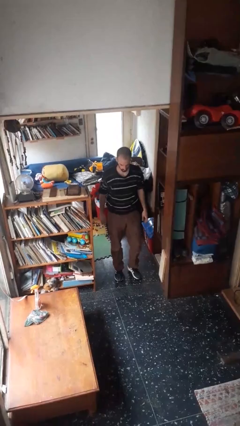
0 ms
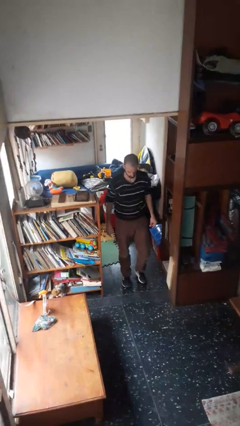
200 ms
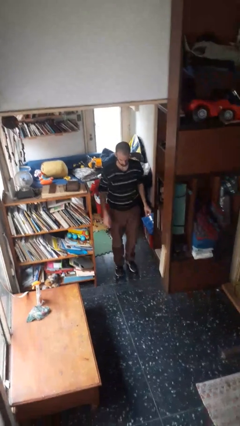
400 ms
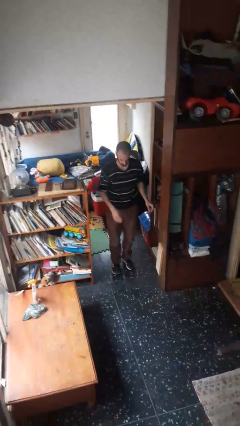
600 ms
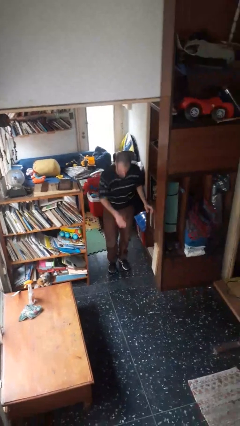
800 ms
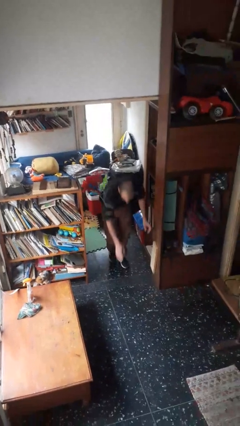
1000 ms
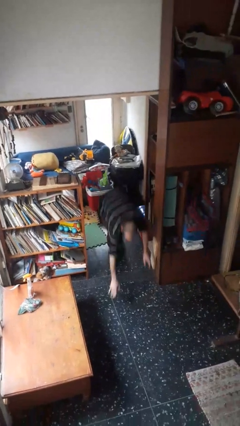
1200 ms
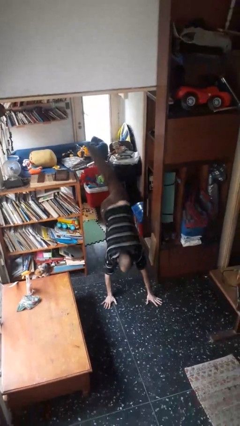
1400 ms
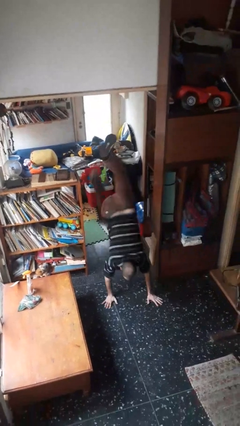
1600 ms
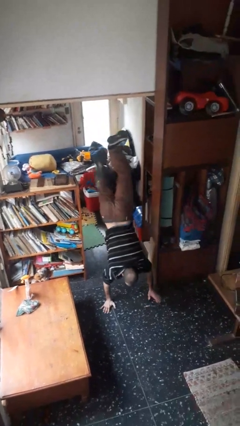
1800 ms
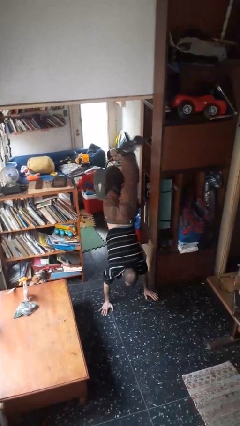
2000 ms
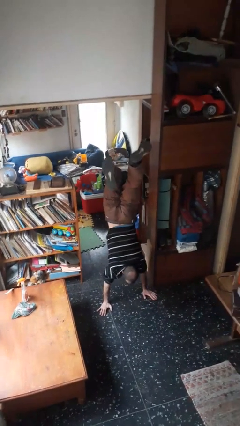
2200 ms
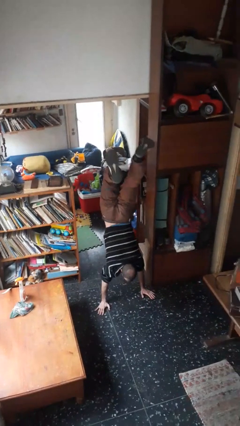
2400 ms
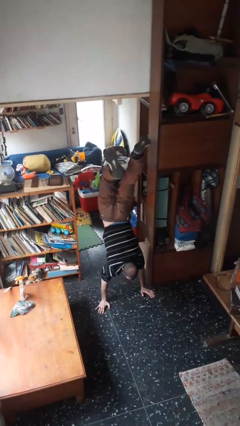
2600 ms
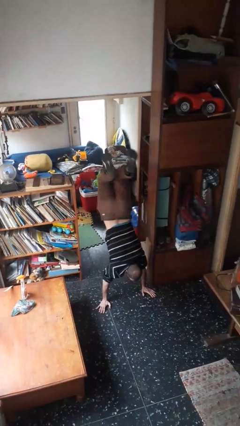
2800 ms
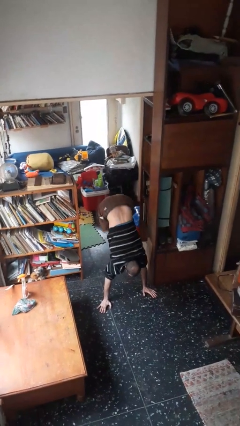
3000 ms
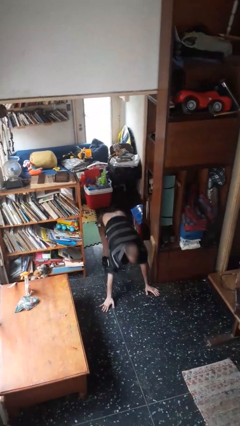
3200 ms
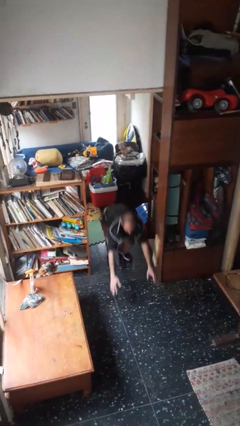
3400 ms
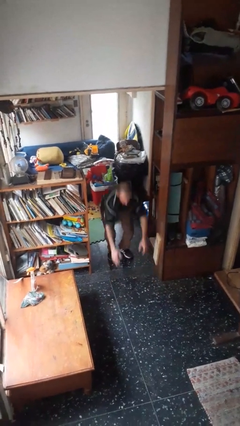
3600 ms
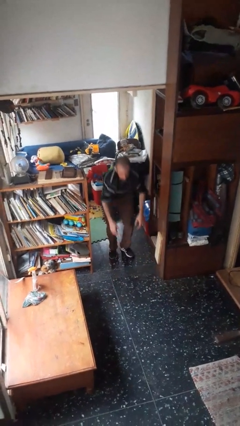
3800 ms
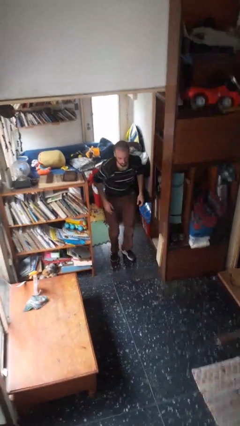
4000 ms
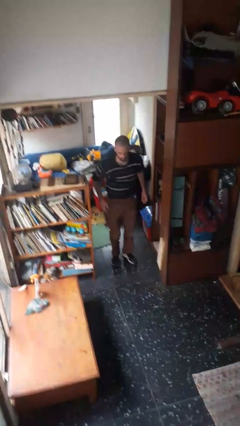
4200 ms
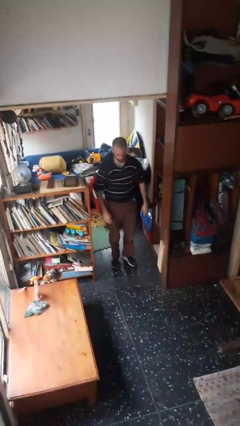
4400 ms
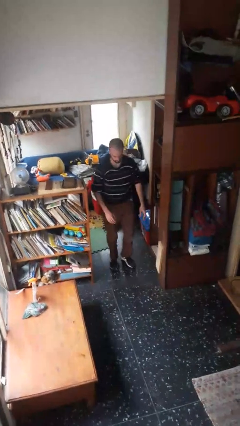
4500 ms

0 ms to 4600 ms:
person handstand

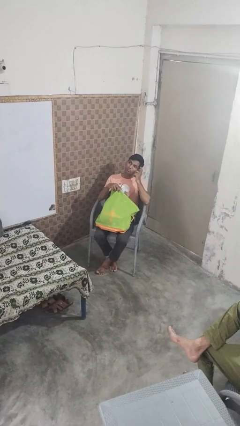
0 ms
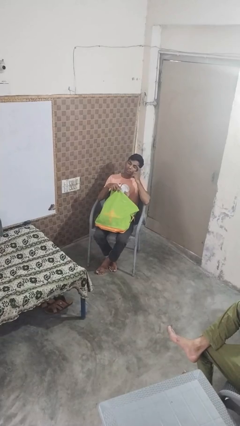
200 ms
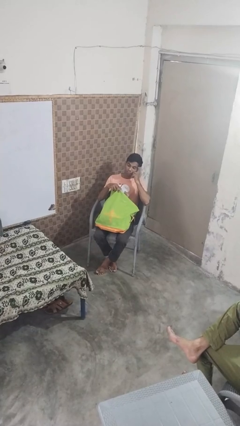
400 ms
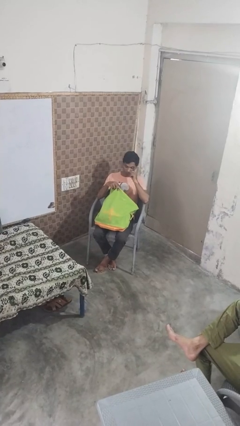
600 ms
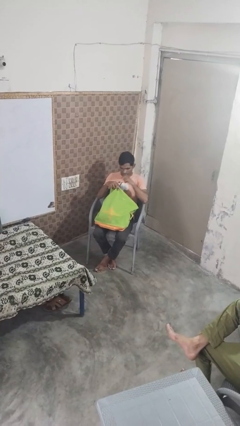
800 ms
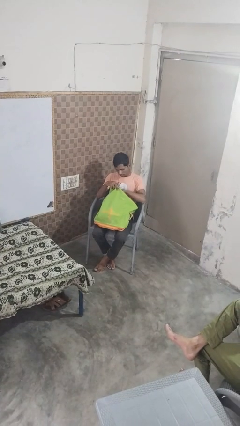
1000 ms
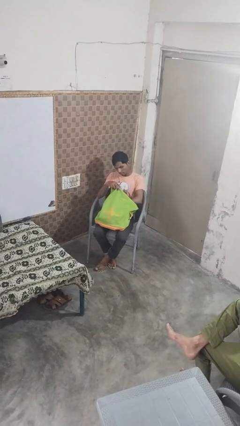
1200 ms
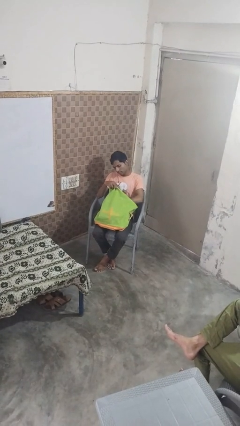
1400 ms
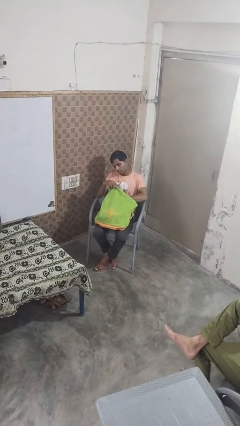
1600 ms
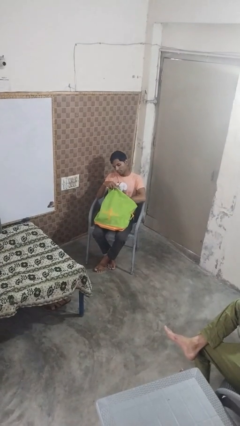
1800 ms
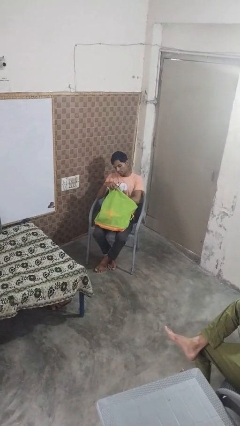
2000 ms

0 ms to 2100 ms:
person searches in bag

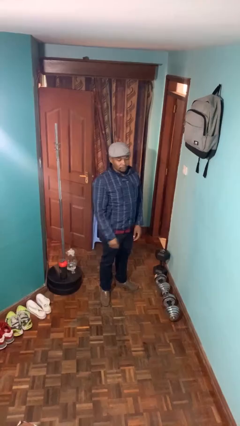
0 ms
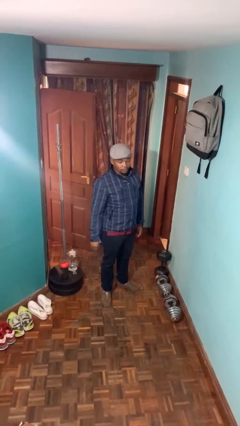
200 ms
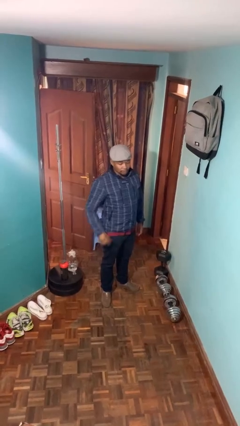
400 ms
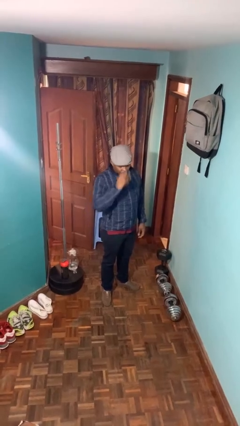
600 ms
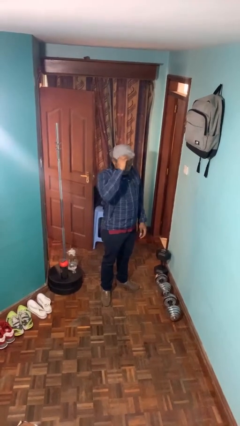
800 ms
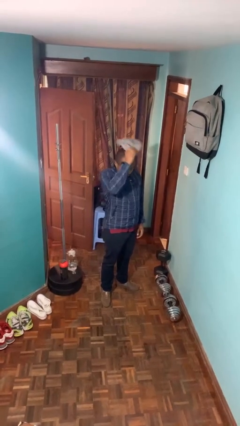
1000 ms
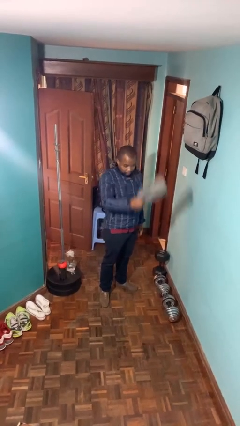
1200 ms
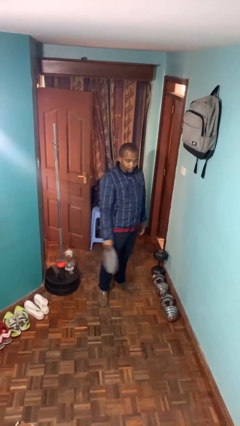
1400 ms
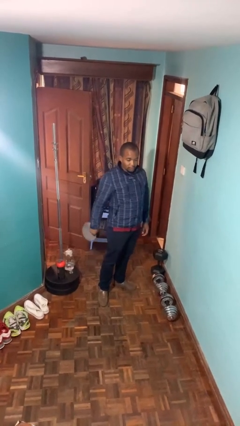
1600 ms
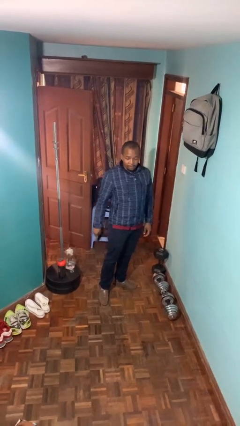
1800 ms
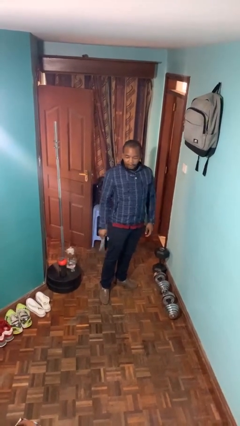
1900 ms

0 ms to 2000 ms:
person takes off hat

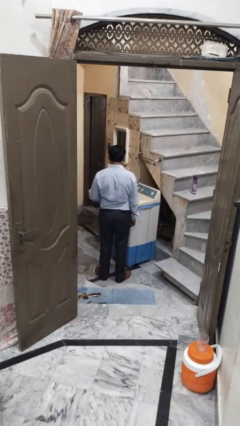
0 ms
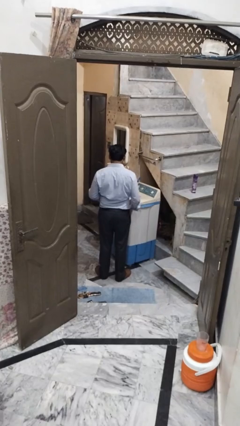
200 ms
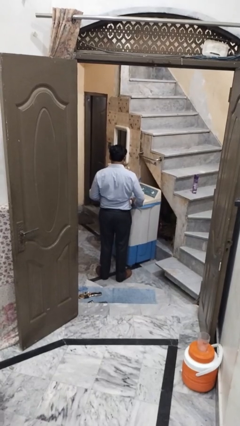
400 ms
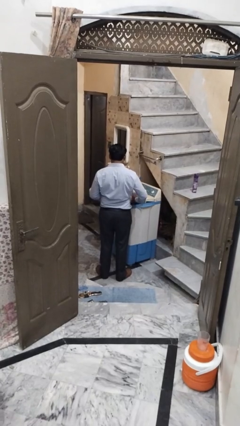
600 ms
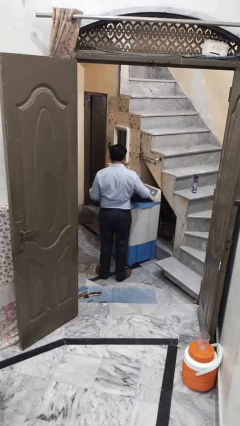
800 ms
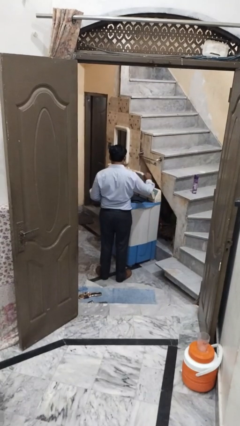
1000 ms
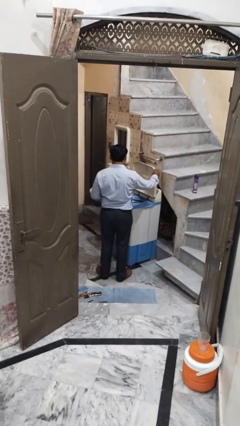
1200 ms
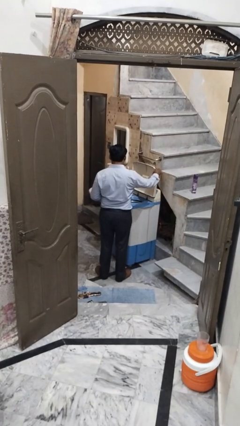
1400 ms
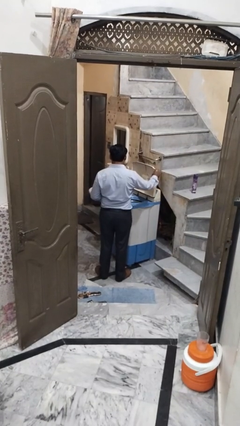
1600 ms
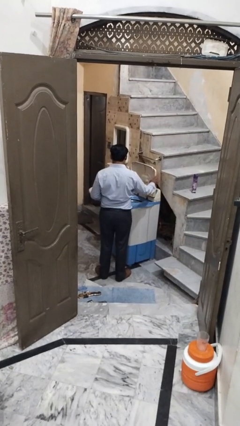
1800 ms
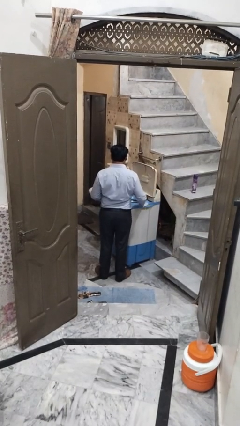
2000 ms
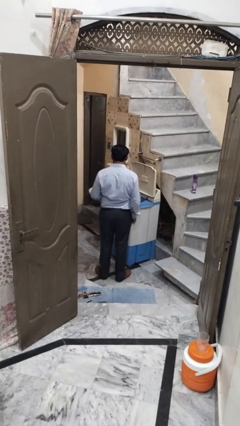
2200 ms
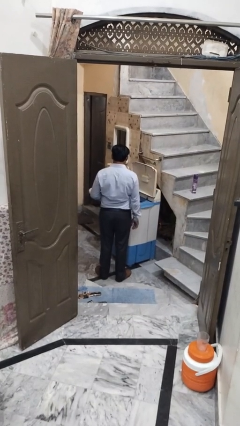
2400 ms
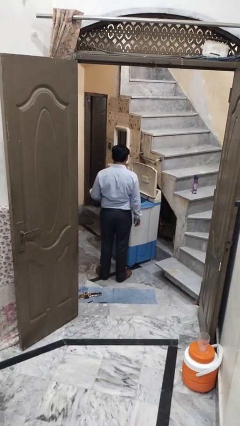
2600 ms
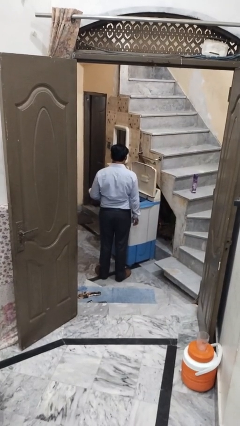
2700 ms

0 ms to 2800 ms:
person opens clothes washer

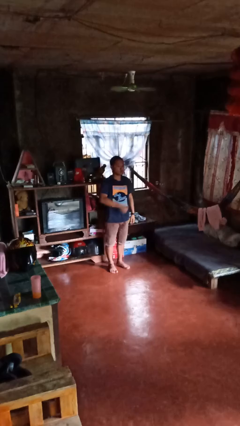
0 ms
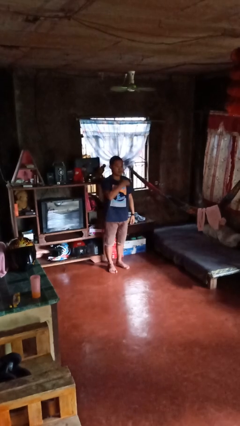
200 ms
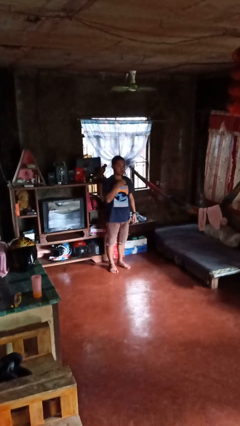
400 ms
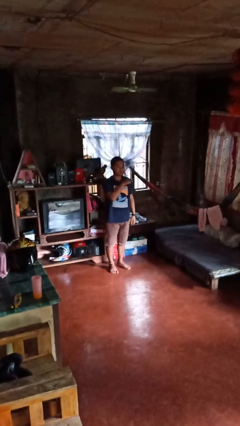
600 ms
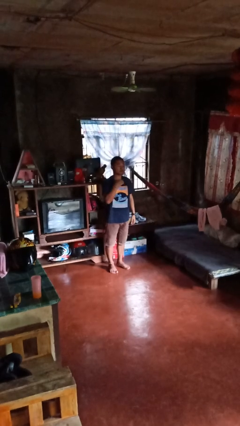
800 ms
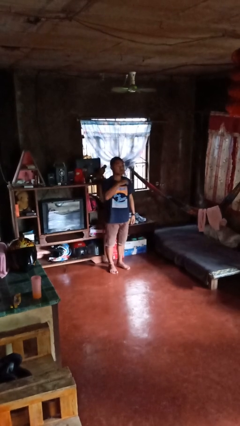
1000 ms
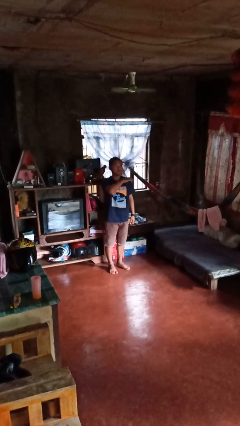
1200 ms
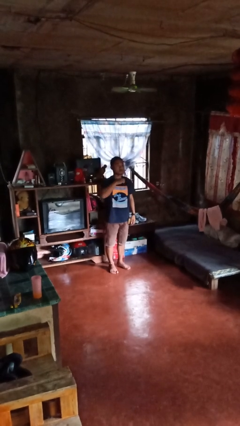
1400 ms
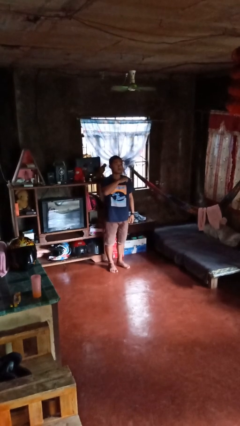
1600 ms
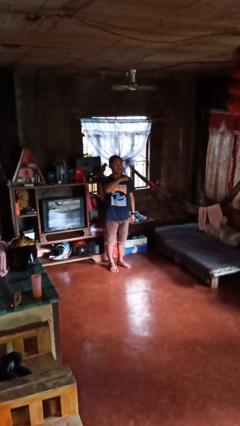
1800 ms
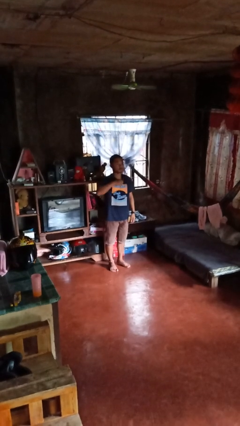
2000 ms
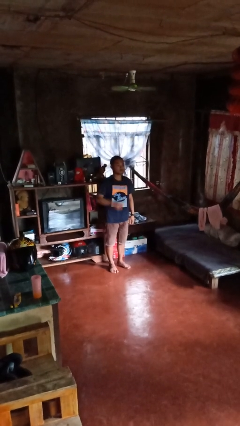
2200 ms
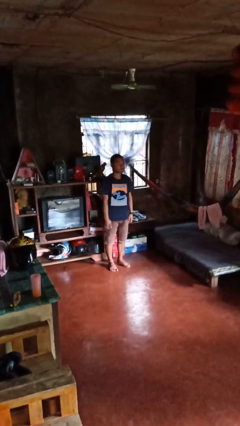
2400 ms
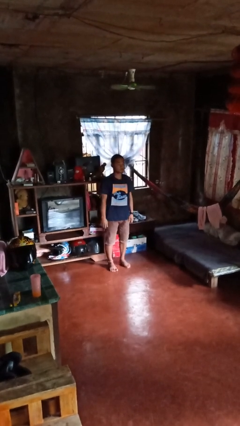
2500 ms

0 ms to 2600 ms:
person gestures cut

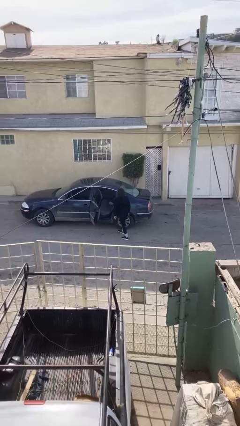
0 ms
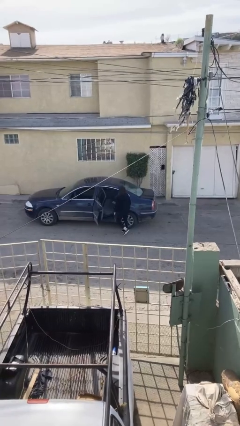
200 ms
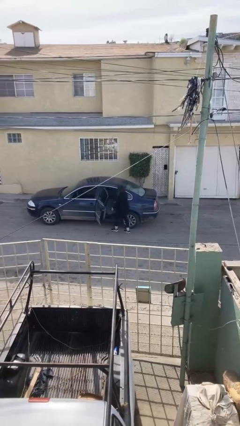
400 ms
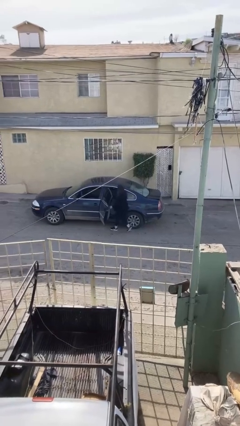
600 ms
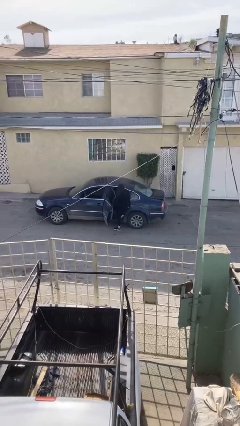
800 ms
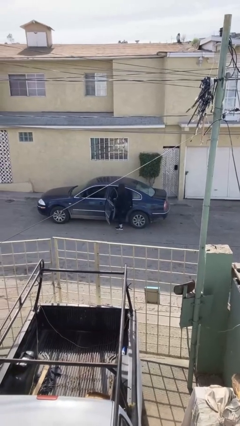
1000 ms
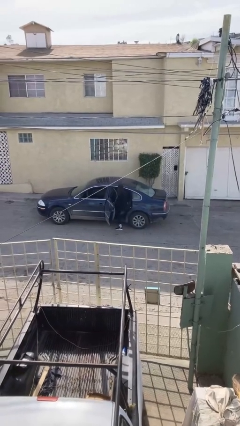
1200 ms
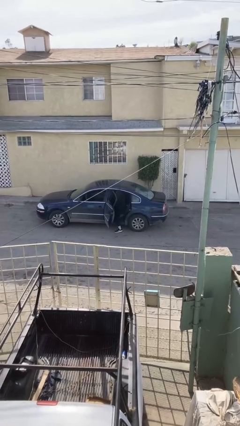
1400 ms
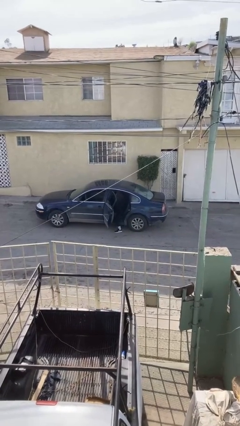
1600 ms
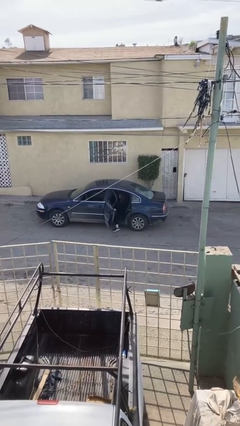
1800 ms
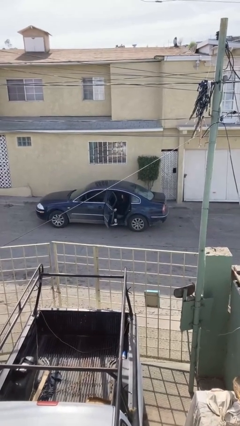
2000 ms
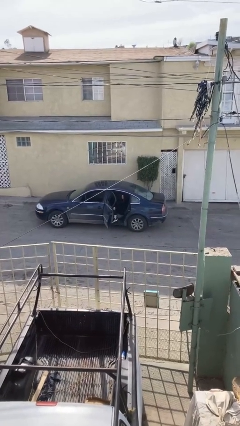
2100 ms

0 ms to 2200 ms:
person enters car

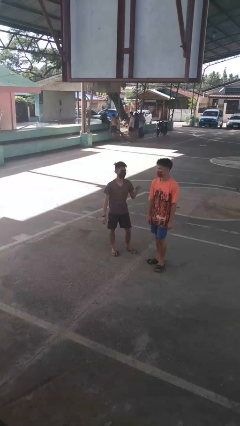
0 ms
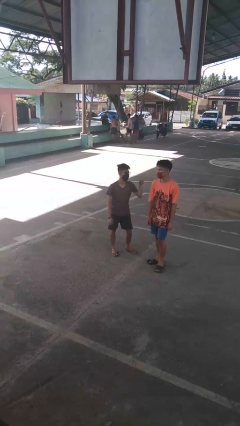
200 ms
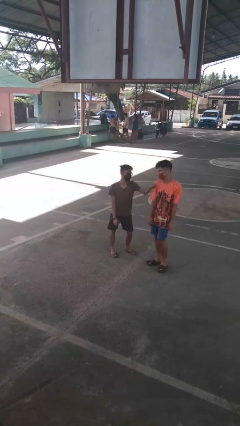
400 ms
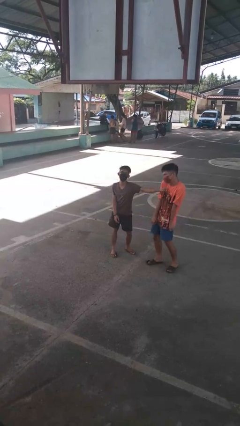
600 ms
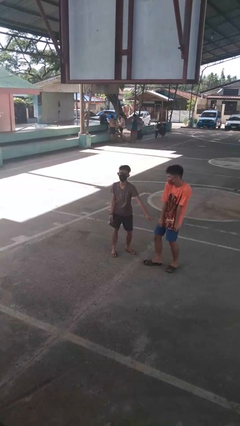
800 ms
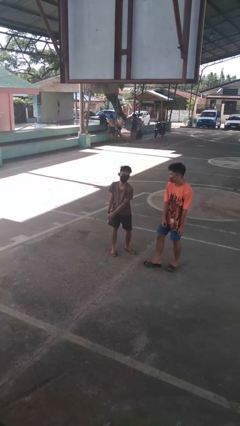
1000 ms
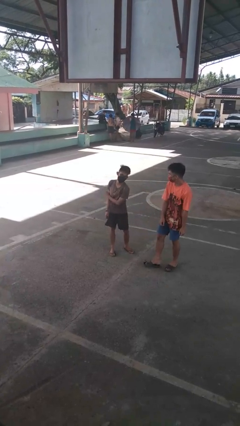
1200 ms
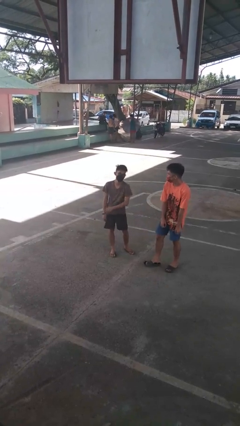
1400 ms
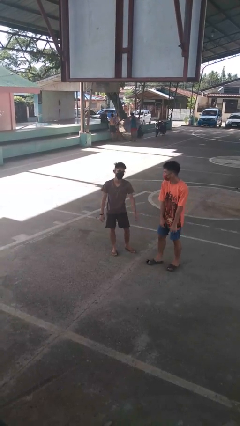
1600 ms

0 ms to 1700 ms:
person pounds shoulders of person
